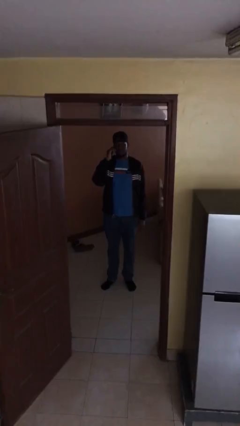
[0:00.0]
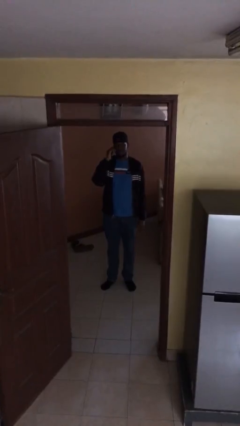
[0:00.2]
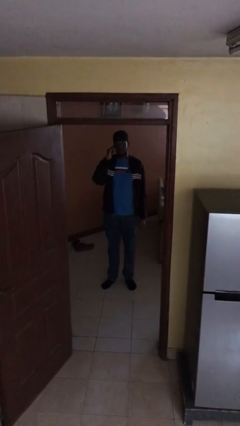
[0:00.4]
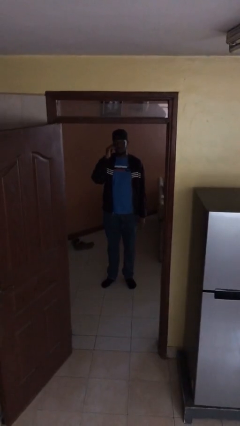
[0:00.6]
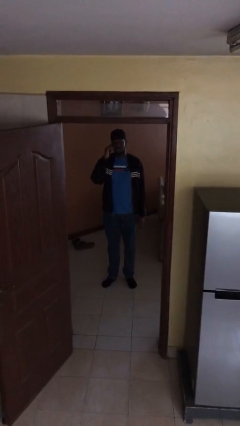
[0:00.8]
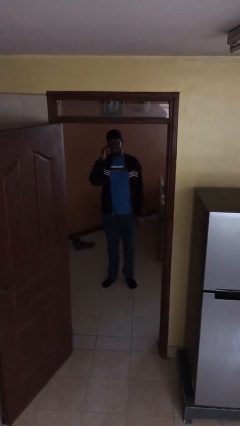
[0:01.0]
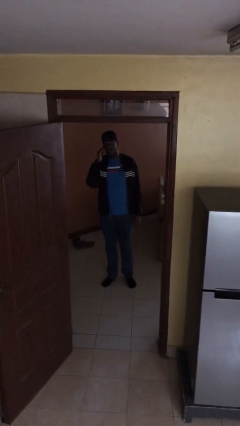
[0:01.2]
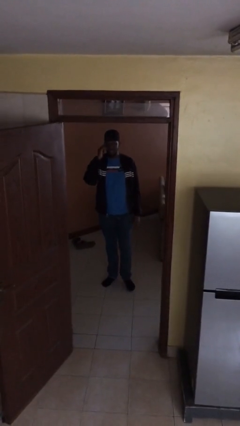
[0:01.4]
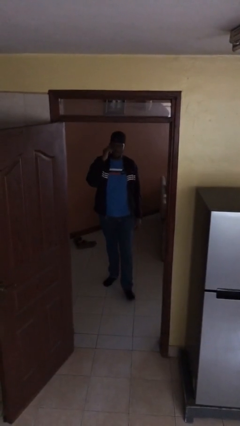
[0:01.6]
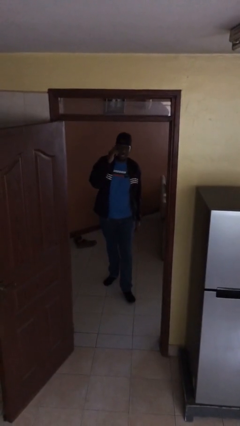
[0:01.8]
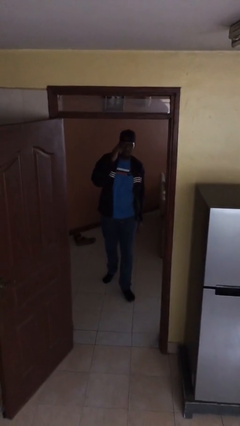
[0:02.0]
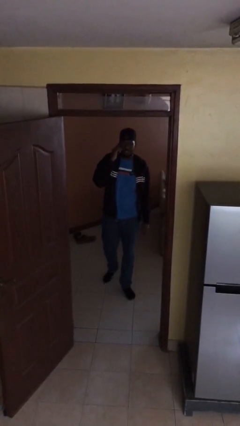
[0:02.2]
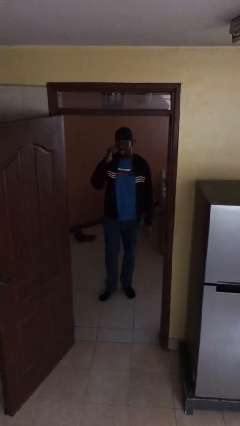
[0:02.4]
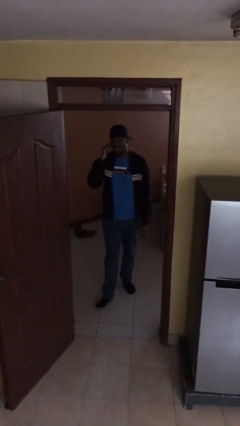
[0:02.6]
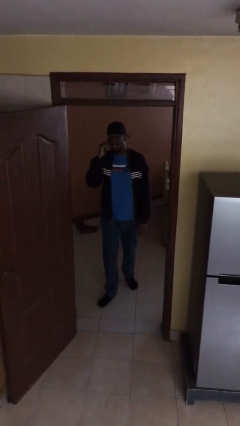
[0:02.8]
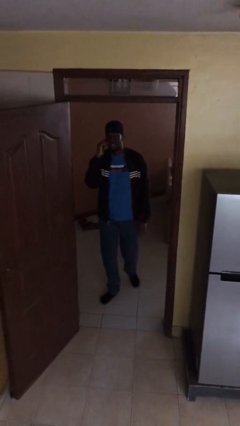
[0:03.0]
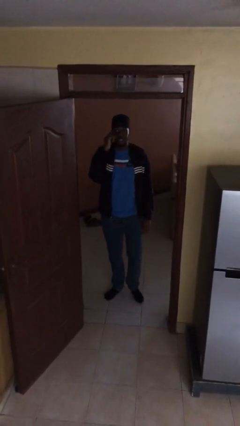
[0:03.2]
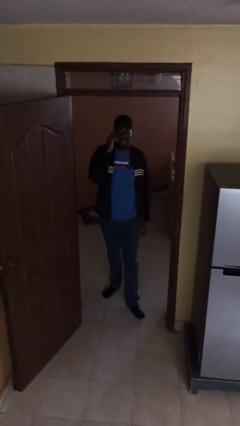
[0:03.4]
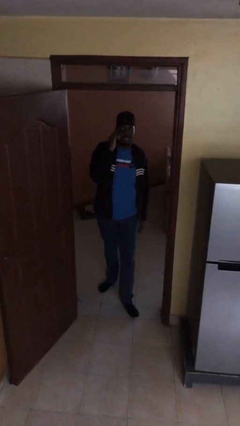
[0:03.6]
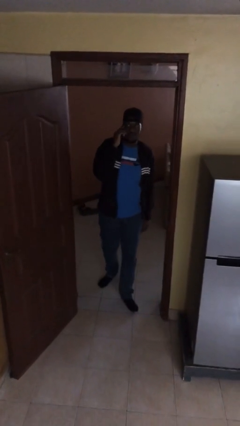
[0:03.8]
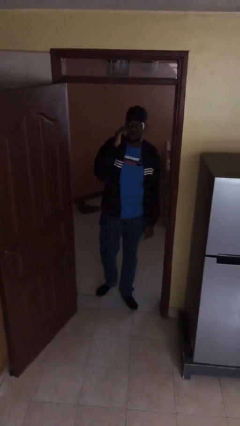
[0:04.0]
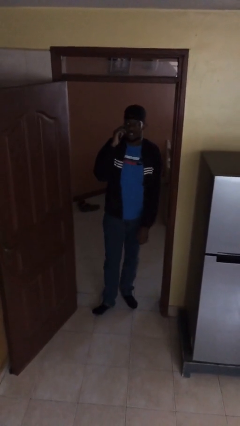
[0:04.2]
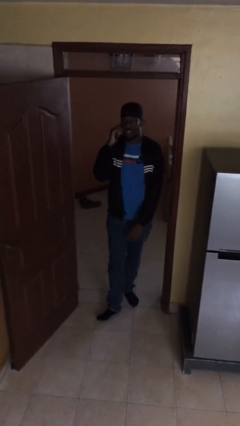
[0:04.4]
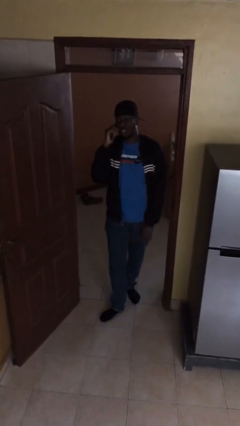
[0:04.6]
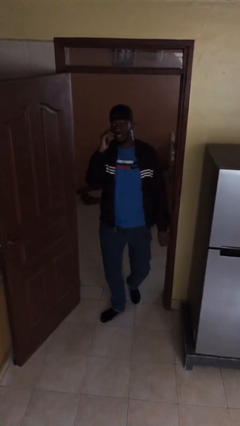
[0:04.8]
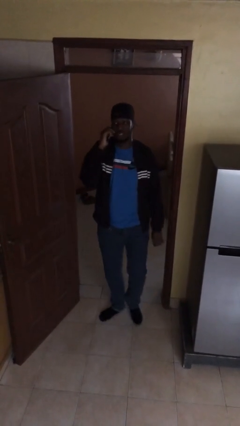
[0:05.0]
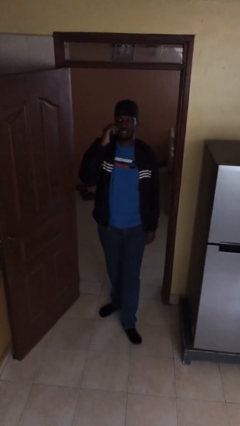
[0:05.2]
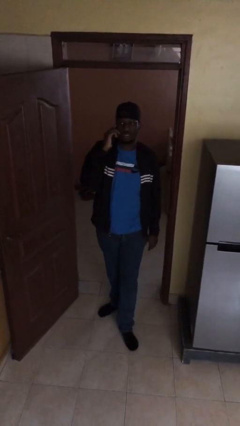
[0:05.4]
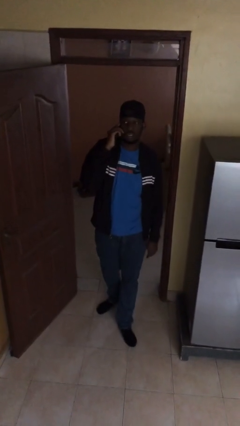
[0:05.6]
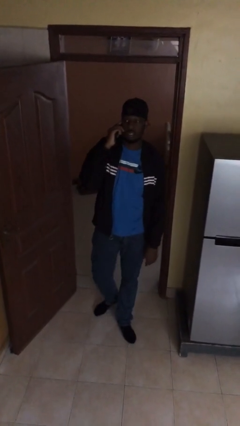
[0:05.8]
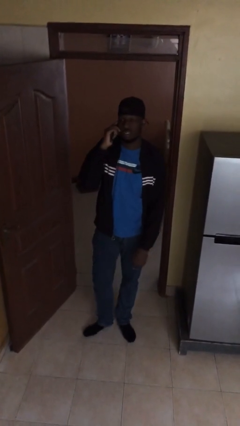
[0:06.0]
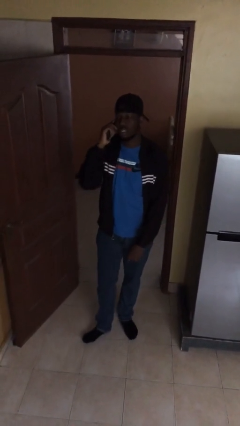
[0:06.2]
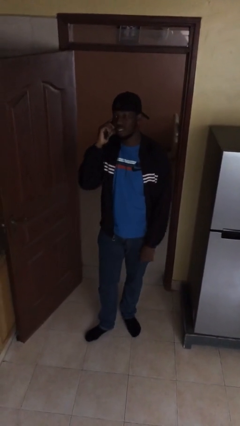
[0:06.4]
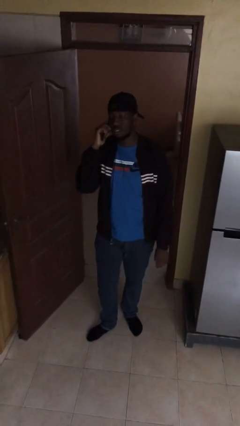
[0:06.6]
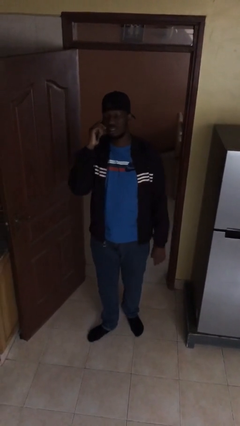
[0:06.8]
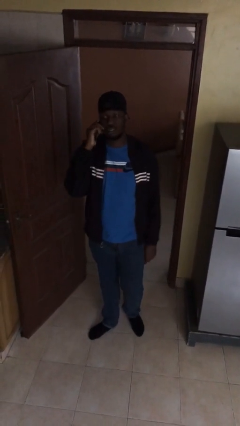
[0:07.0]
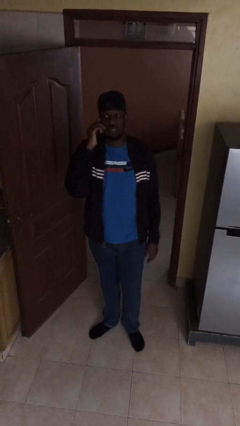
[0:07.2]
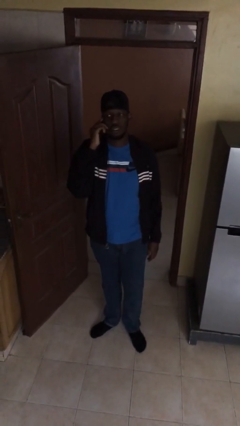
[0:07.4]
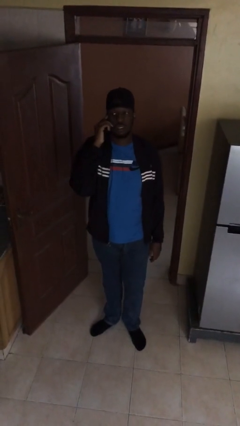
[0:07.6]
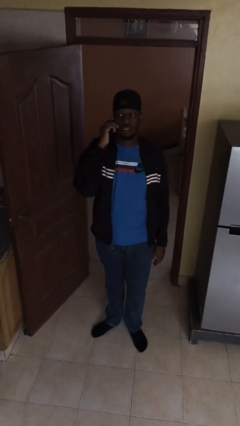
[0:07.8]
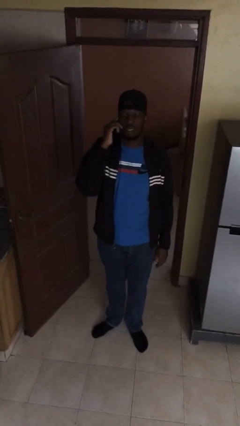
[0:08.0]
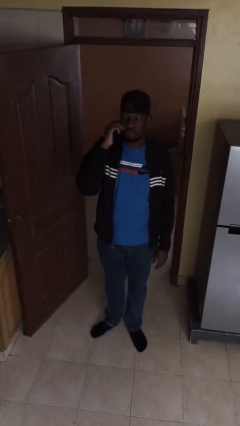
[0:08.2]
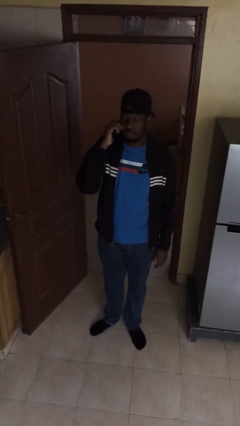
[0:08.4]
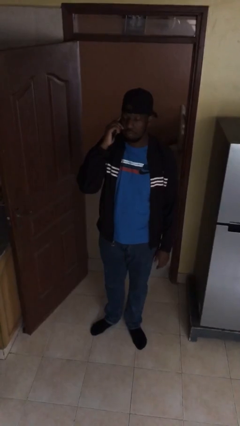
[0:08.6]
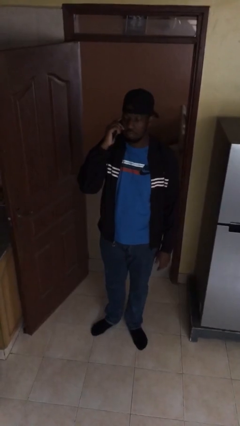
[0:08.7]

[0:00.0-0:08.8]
person enters scene through structure

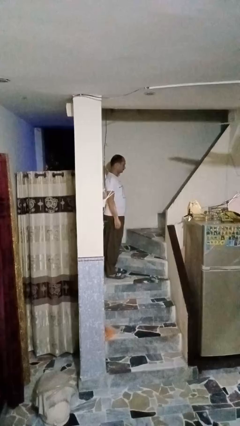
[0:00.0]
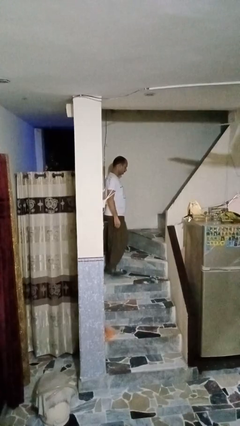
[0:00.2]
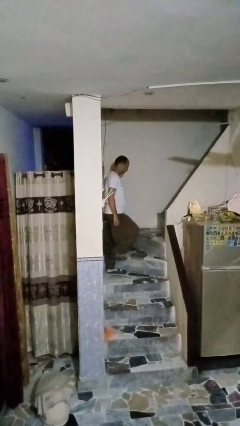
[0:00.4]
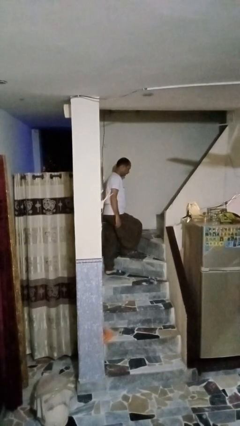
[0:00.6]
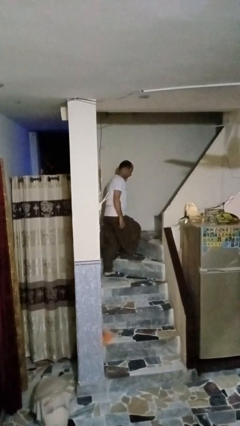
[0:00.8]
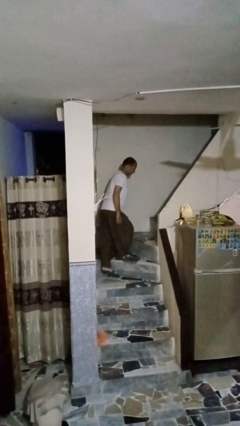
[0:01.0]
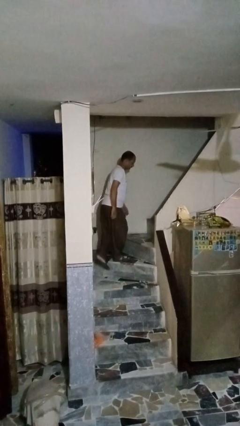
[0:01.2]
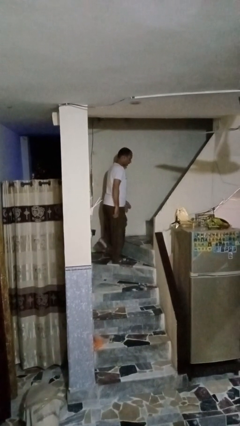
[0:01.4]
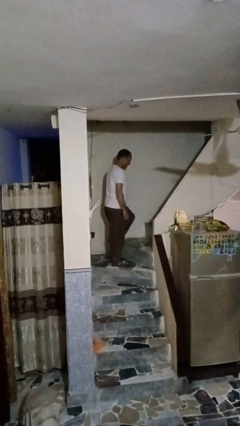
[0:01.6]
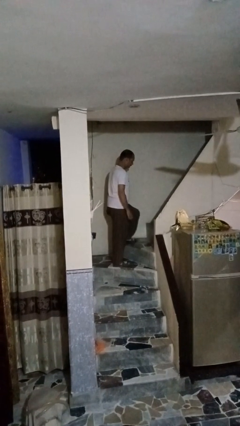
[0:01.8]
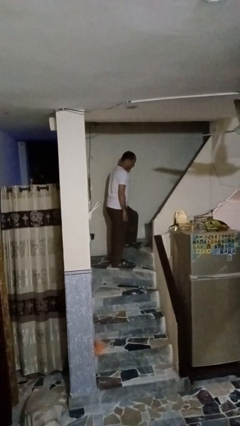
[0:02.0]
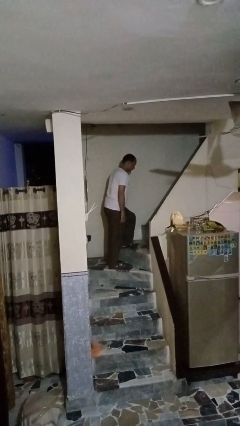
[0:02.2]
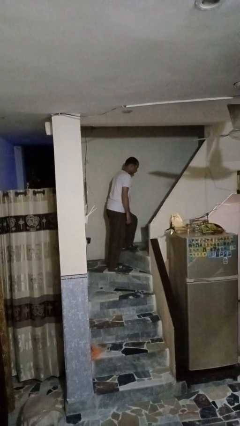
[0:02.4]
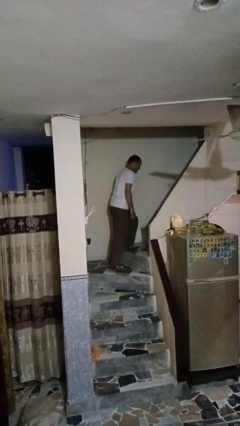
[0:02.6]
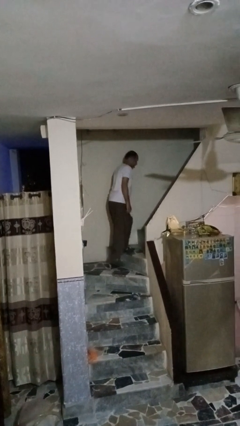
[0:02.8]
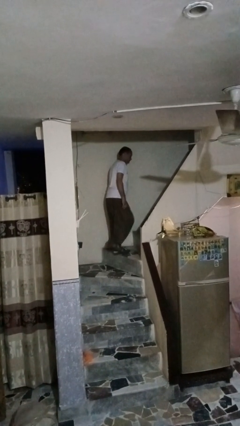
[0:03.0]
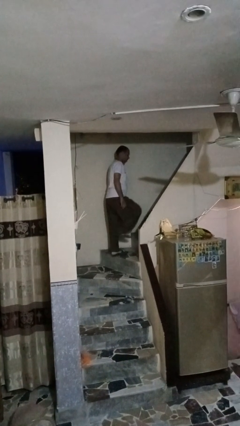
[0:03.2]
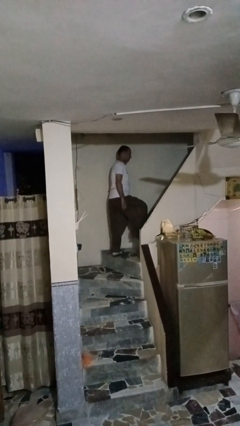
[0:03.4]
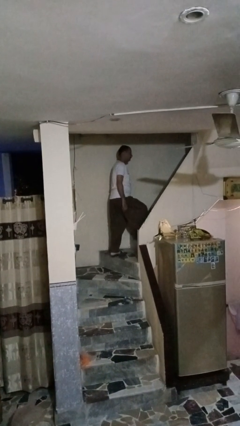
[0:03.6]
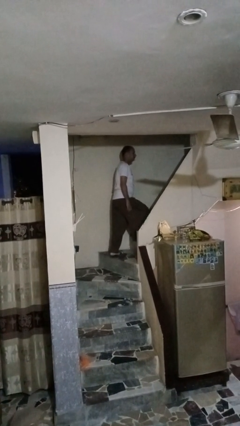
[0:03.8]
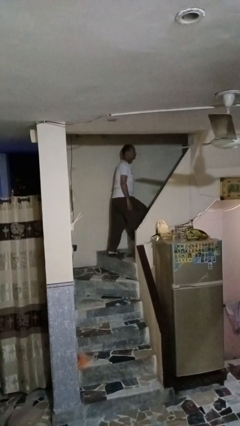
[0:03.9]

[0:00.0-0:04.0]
person climbs up stairs

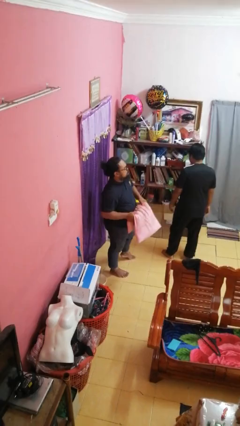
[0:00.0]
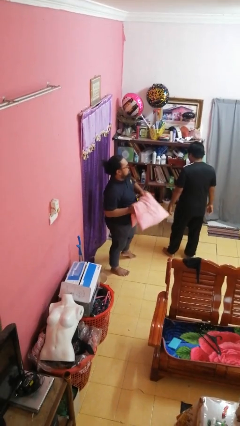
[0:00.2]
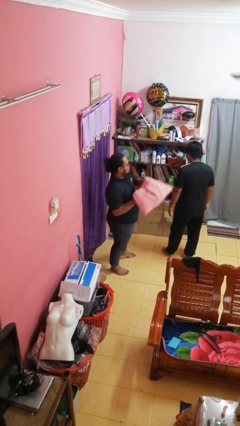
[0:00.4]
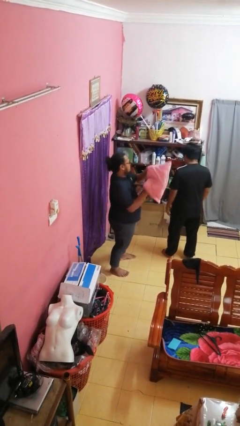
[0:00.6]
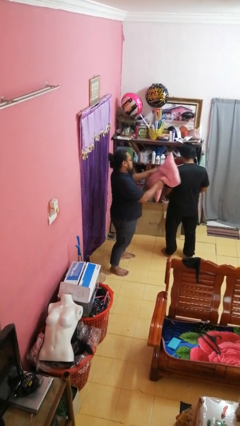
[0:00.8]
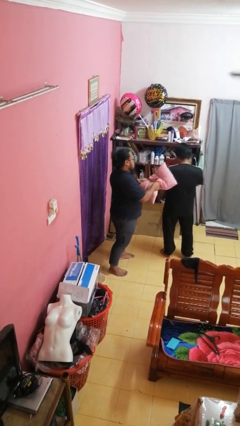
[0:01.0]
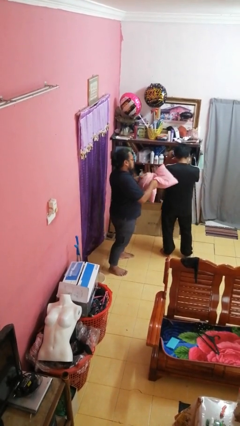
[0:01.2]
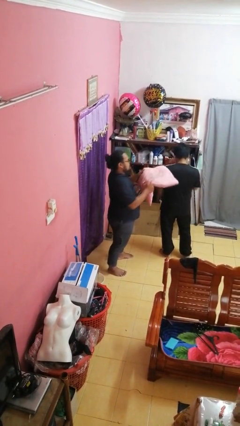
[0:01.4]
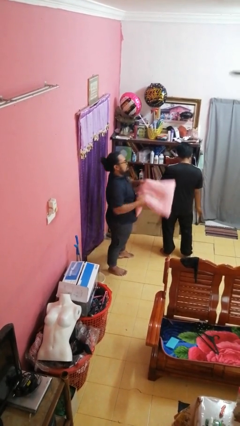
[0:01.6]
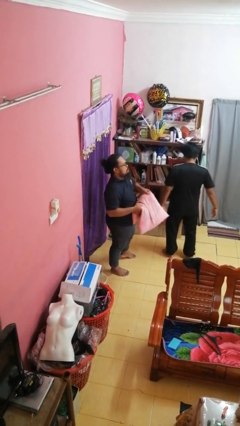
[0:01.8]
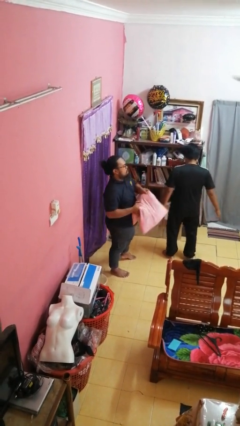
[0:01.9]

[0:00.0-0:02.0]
person hits person with pillow

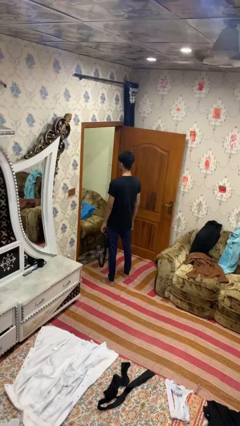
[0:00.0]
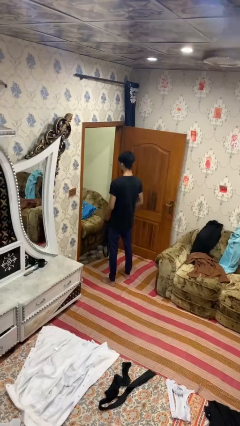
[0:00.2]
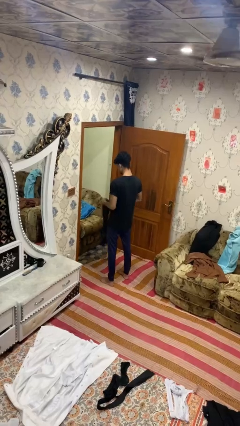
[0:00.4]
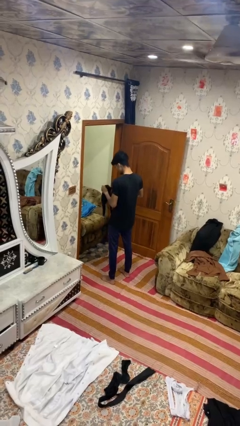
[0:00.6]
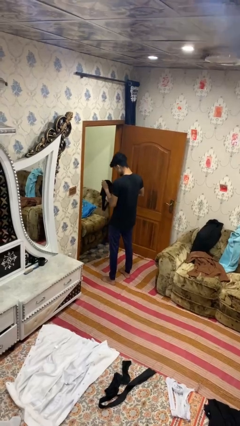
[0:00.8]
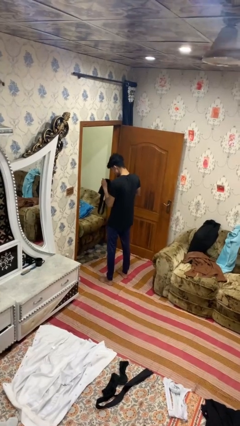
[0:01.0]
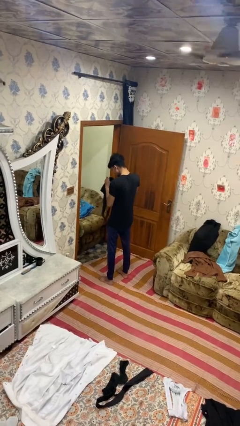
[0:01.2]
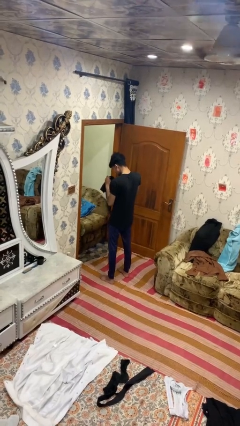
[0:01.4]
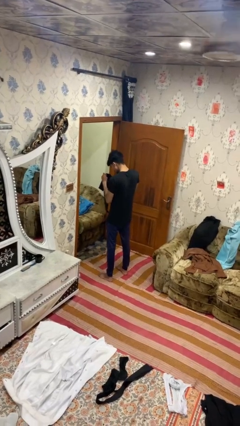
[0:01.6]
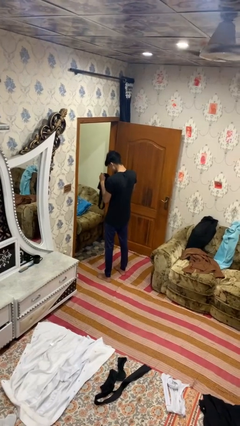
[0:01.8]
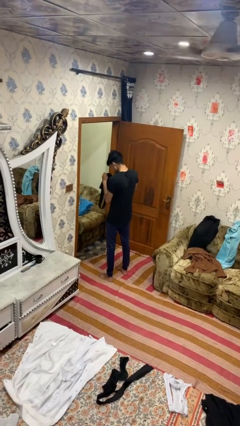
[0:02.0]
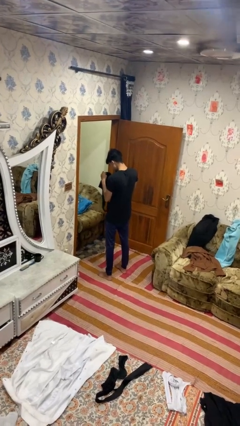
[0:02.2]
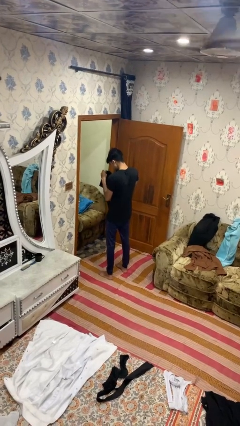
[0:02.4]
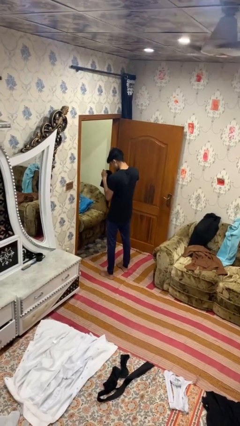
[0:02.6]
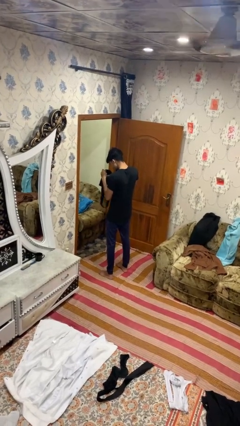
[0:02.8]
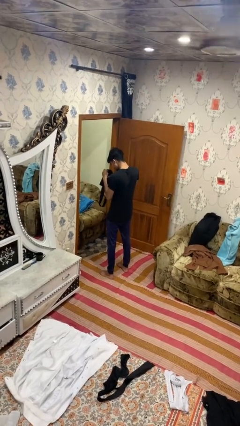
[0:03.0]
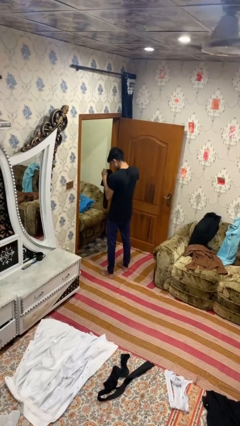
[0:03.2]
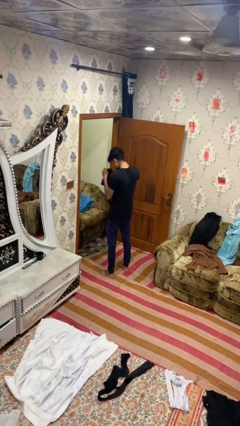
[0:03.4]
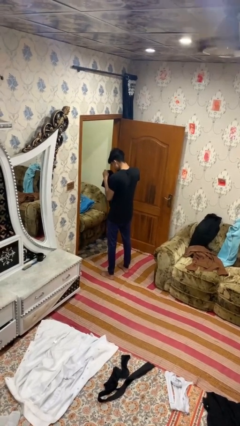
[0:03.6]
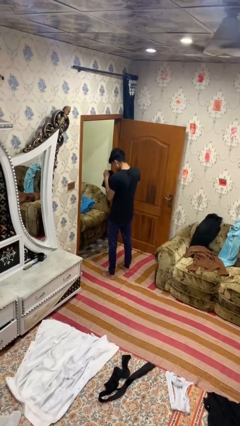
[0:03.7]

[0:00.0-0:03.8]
person searches in bag
